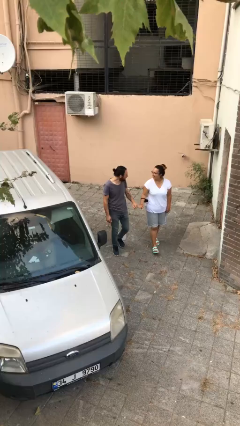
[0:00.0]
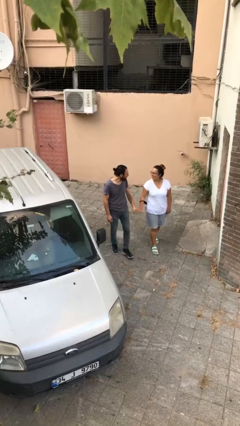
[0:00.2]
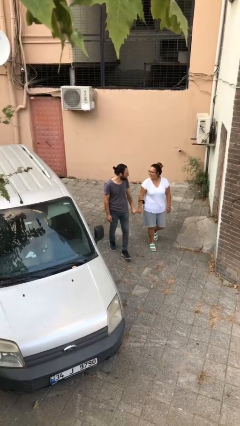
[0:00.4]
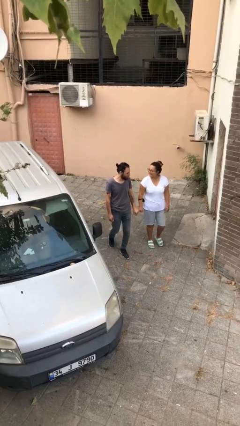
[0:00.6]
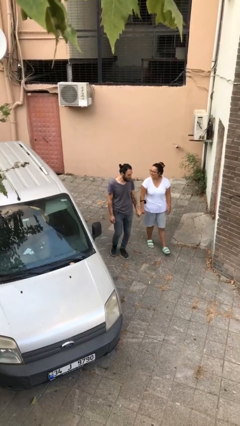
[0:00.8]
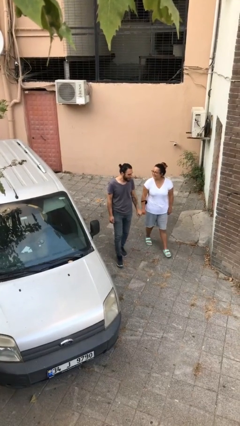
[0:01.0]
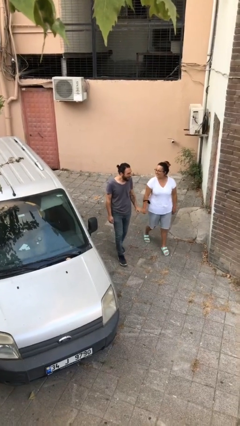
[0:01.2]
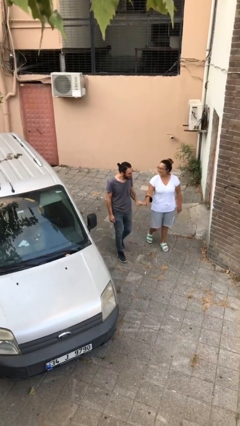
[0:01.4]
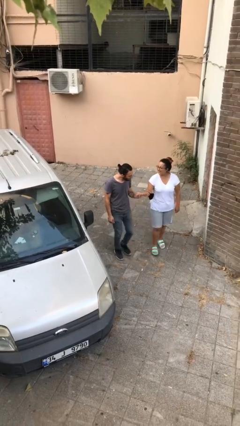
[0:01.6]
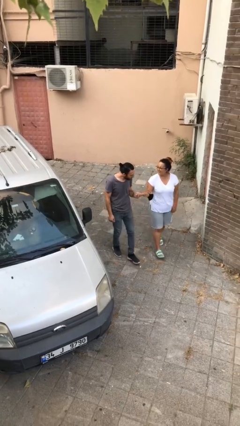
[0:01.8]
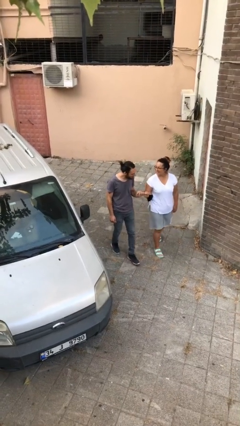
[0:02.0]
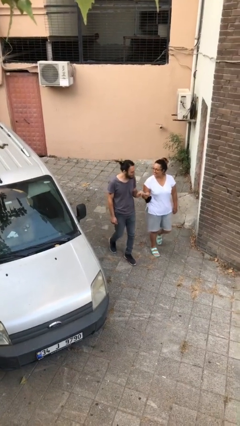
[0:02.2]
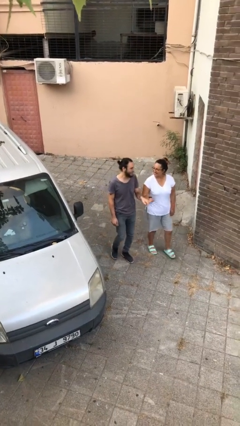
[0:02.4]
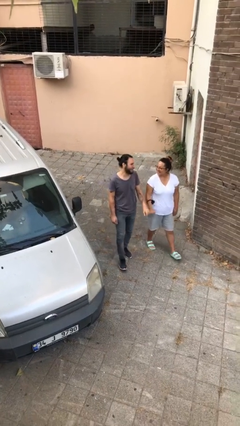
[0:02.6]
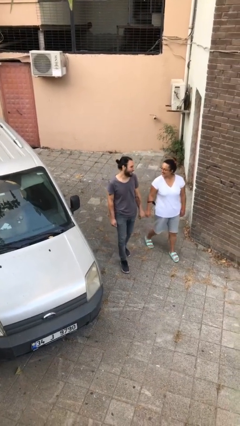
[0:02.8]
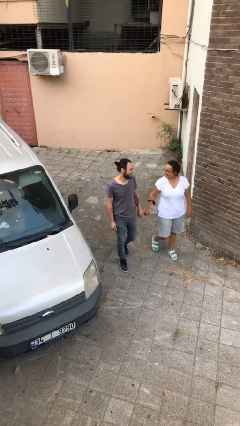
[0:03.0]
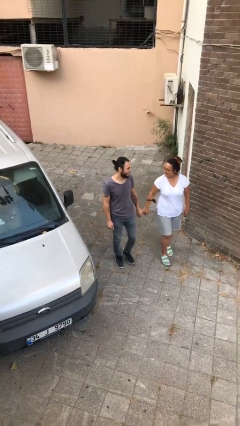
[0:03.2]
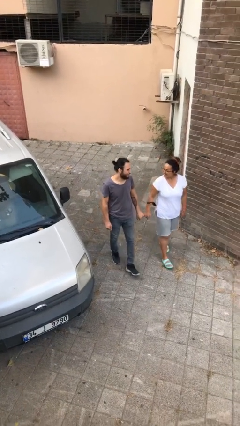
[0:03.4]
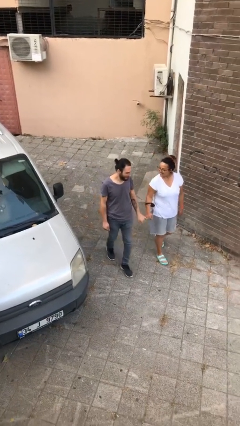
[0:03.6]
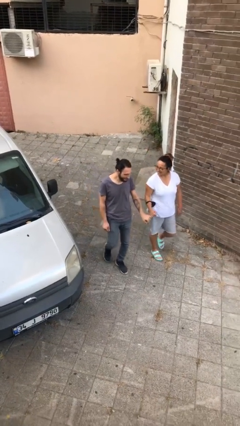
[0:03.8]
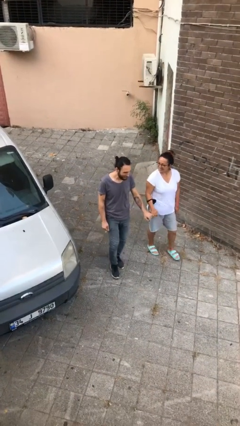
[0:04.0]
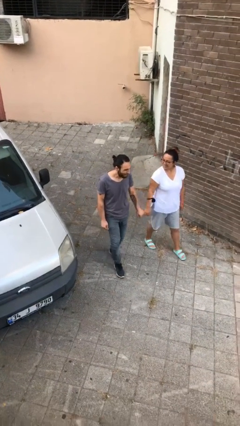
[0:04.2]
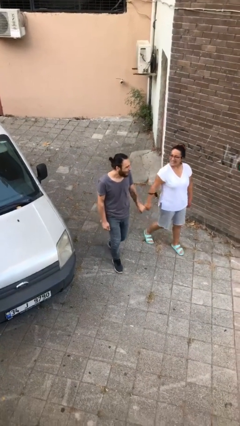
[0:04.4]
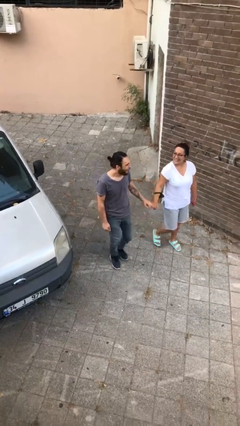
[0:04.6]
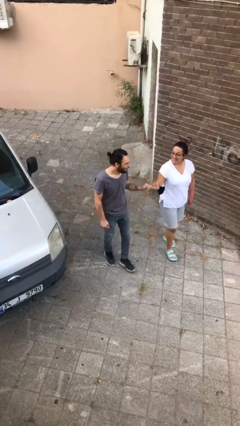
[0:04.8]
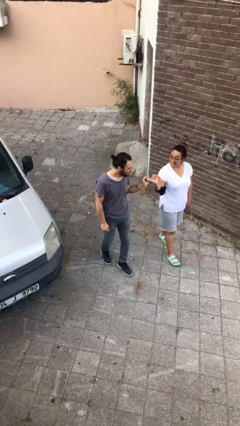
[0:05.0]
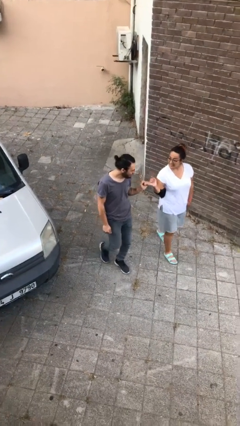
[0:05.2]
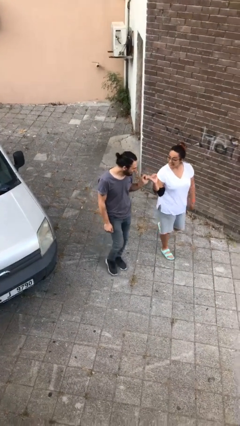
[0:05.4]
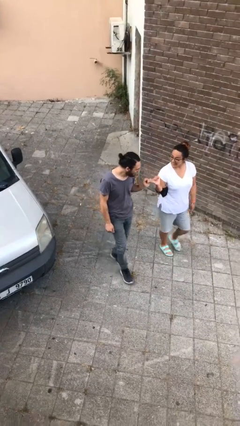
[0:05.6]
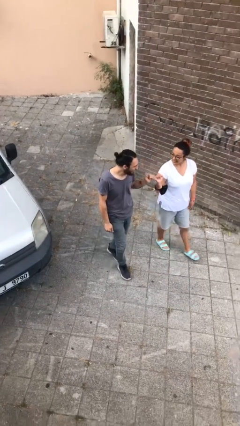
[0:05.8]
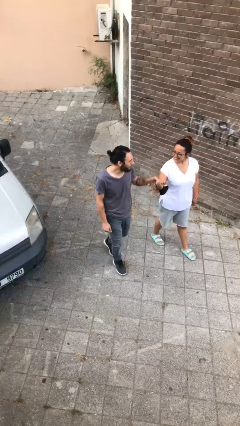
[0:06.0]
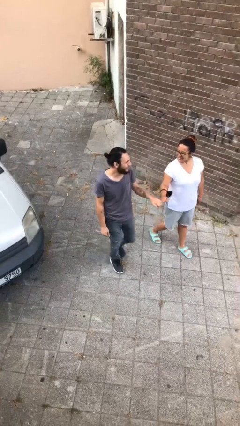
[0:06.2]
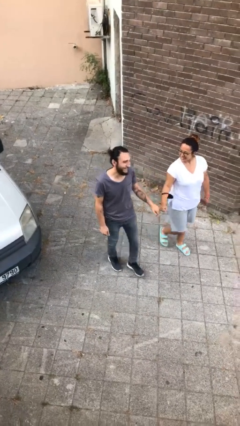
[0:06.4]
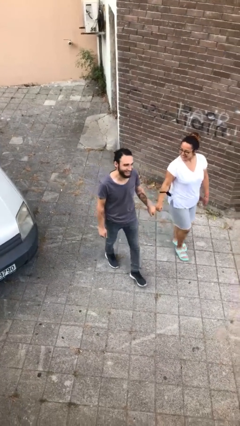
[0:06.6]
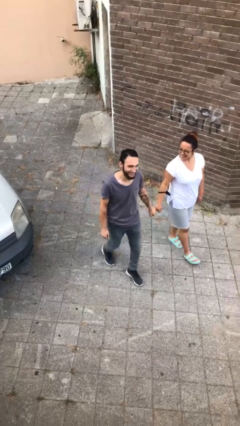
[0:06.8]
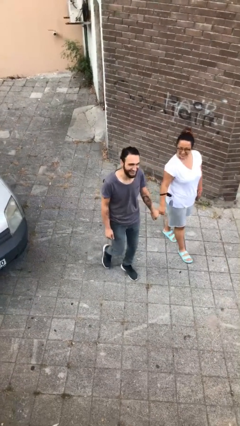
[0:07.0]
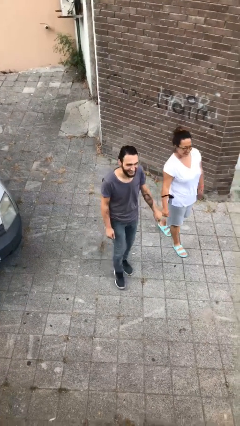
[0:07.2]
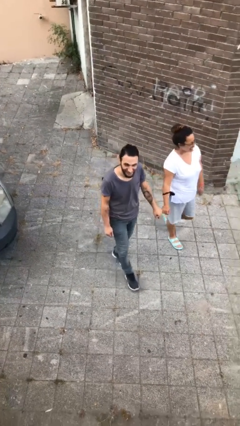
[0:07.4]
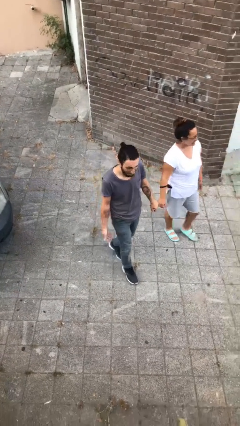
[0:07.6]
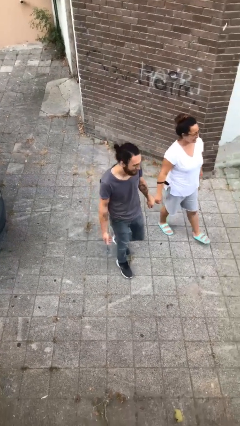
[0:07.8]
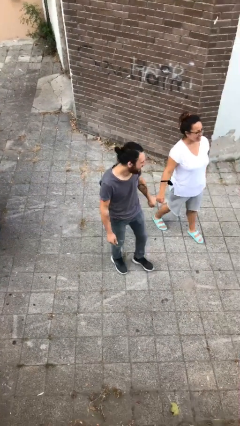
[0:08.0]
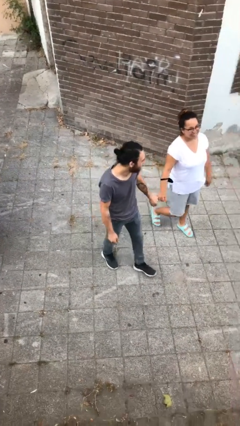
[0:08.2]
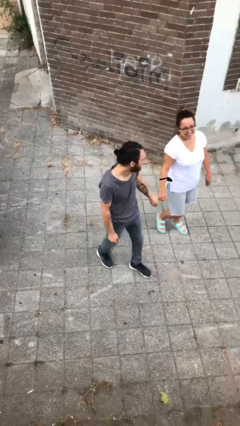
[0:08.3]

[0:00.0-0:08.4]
person holds hand

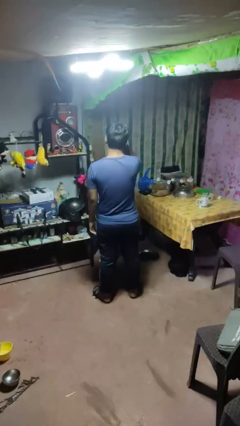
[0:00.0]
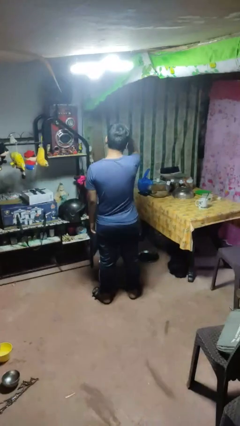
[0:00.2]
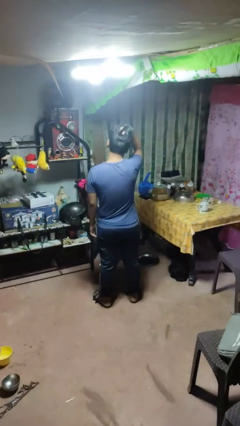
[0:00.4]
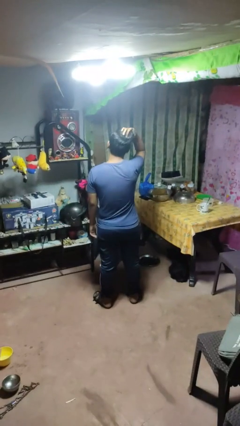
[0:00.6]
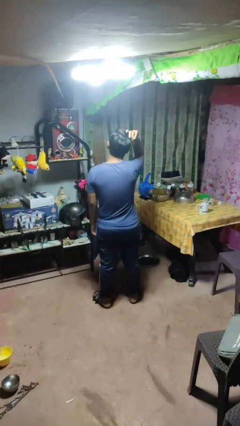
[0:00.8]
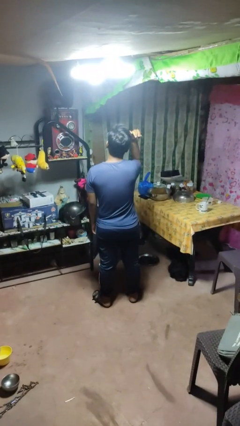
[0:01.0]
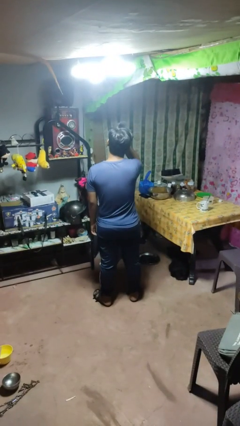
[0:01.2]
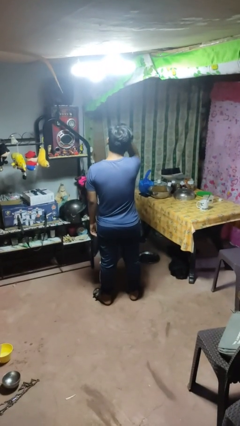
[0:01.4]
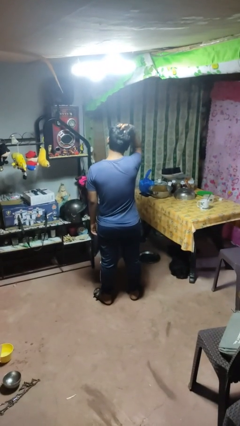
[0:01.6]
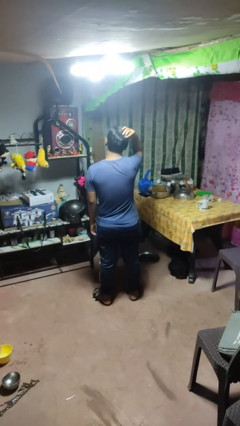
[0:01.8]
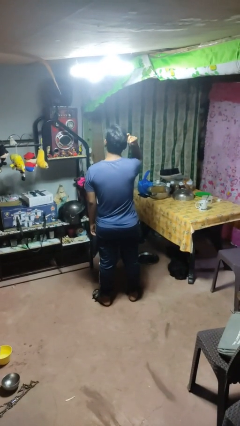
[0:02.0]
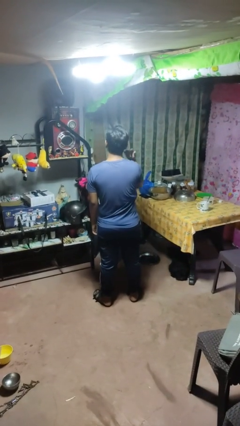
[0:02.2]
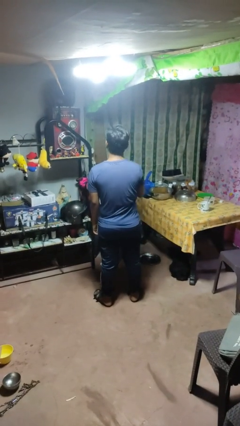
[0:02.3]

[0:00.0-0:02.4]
person strokes hair

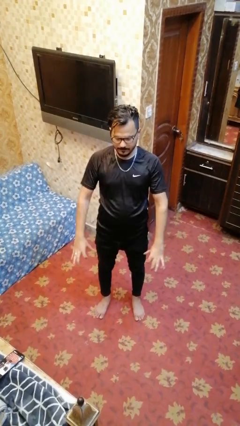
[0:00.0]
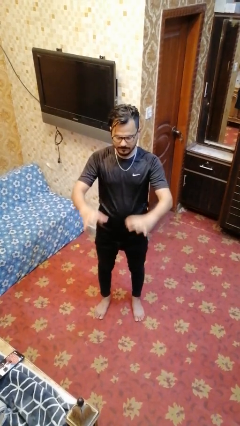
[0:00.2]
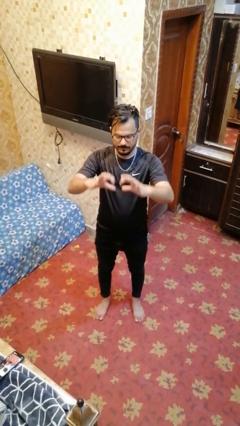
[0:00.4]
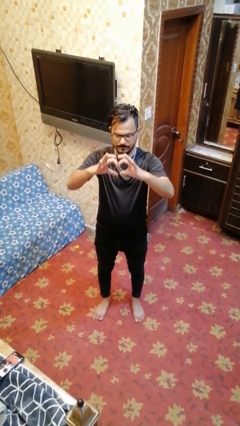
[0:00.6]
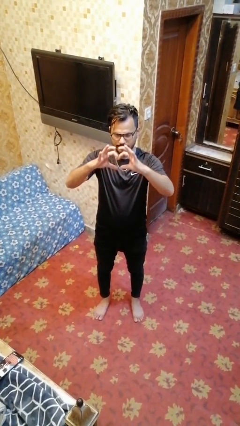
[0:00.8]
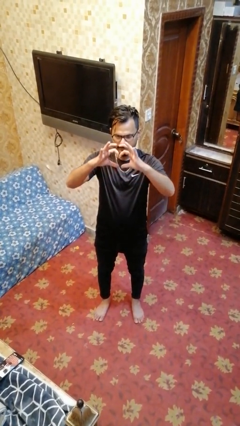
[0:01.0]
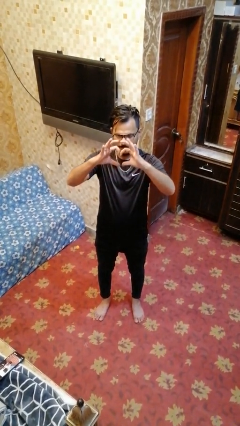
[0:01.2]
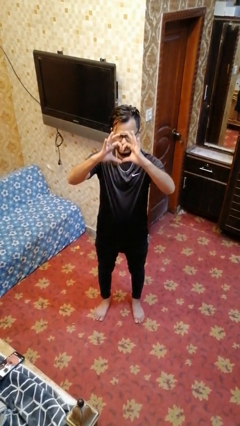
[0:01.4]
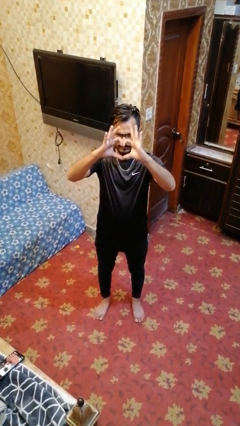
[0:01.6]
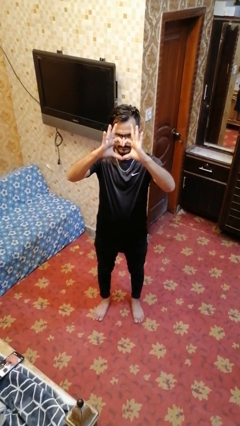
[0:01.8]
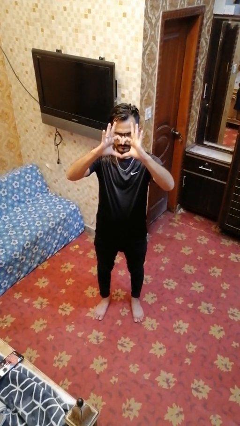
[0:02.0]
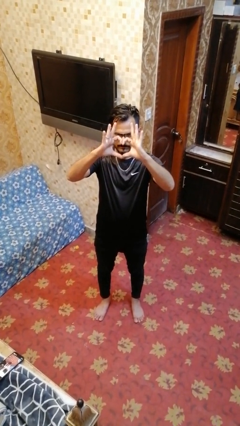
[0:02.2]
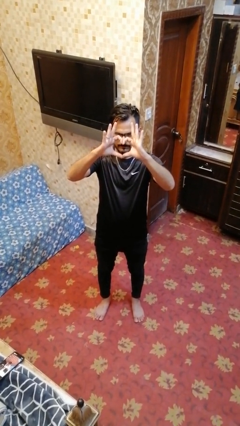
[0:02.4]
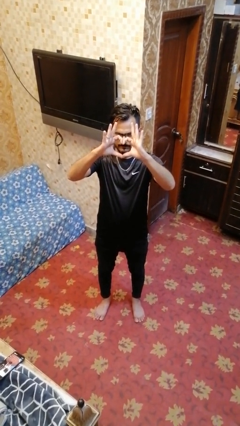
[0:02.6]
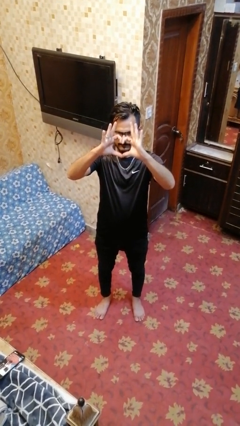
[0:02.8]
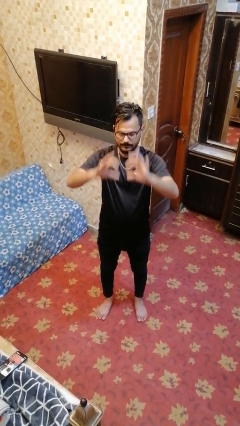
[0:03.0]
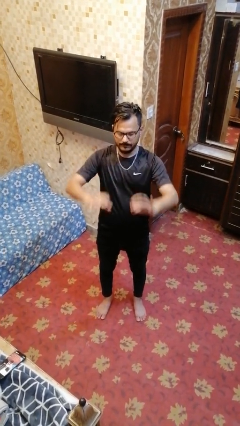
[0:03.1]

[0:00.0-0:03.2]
person gestures heart

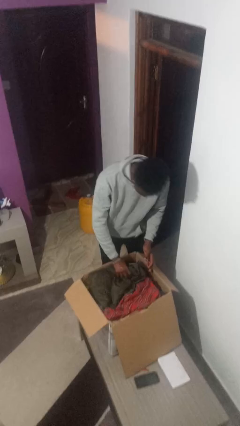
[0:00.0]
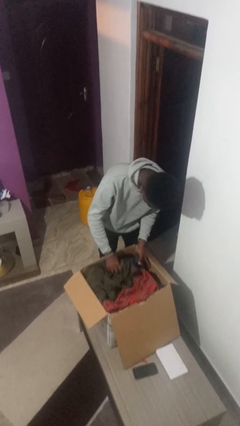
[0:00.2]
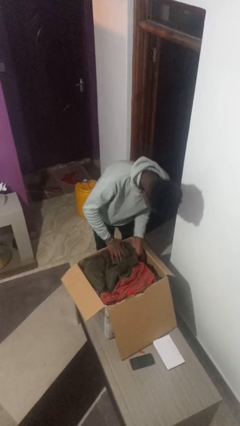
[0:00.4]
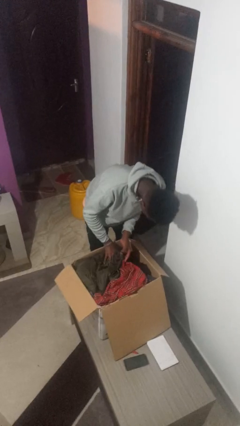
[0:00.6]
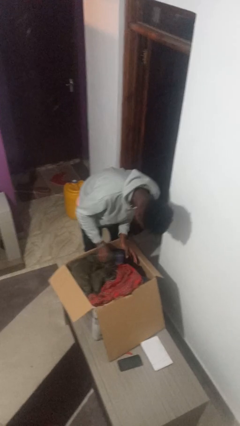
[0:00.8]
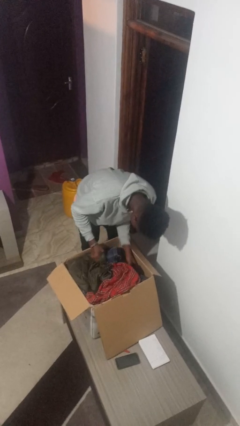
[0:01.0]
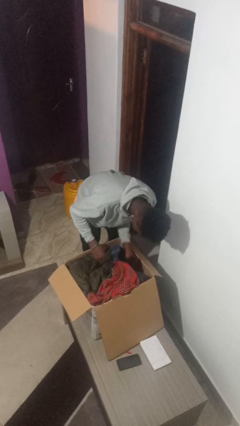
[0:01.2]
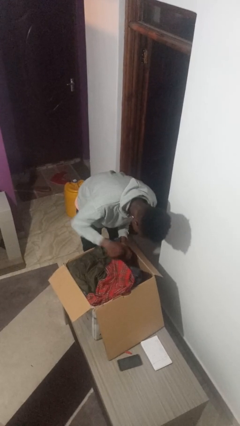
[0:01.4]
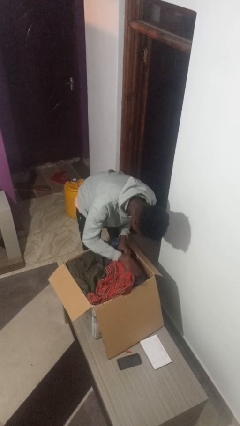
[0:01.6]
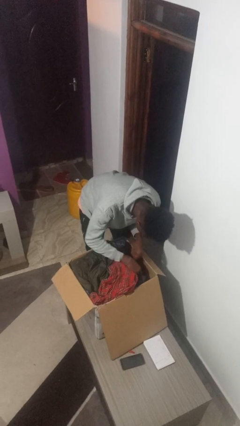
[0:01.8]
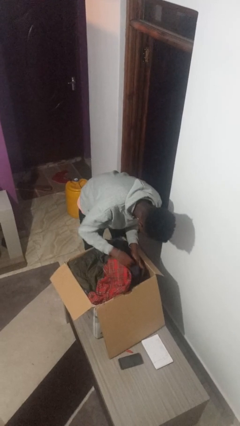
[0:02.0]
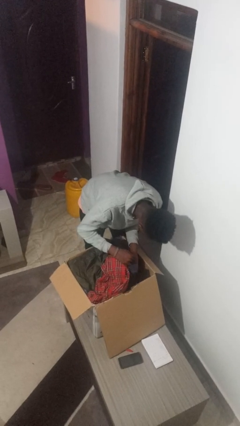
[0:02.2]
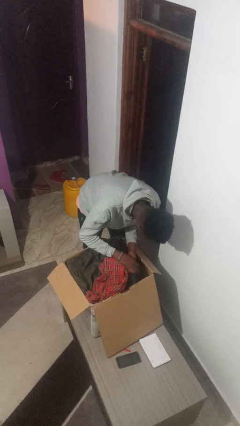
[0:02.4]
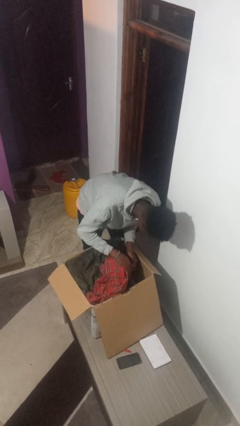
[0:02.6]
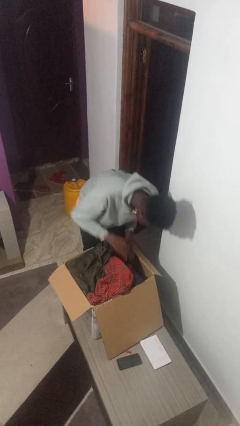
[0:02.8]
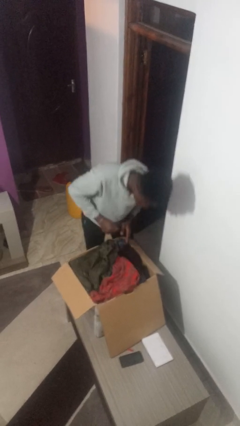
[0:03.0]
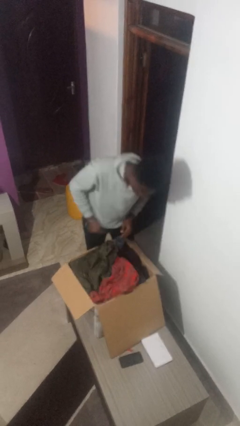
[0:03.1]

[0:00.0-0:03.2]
person searches in box

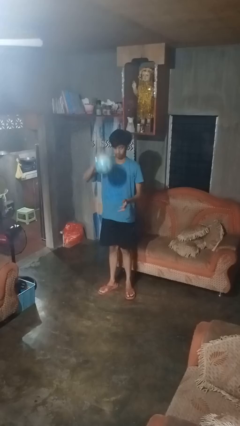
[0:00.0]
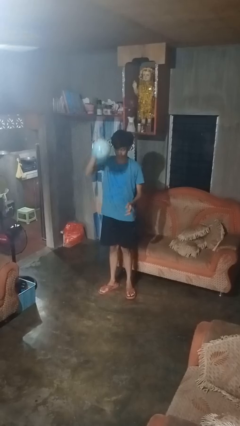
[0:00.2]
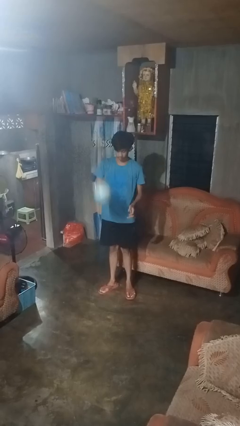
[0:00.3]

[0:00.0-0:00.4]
person bounces ball on floor
